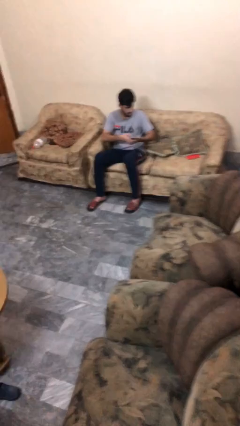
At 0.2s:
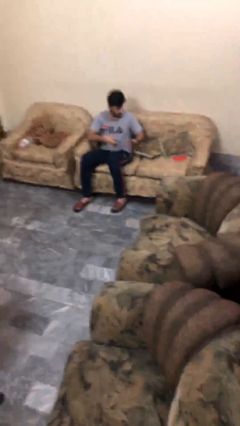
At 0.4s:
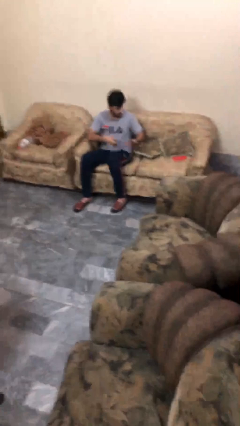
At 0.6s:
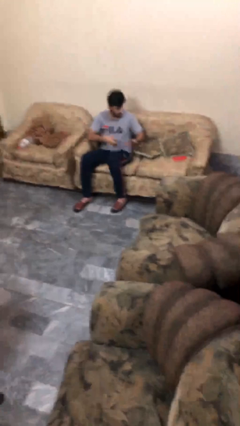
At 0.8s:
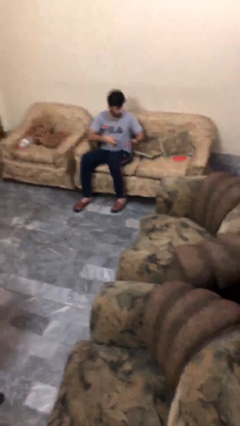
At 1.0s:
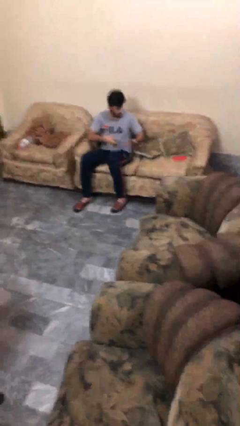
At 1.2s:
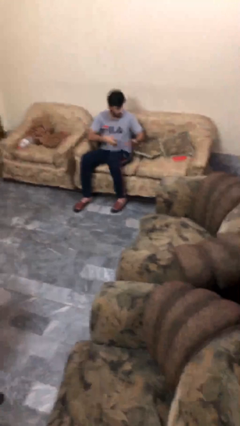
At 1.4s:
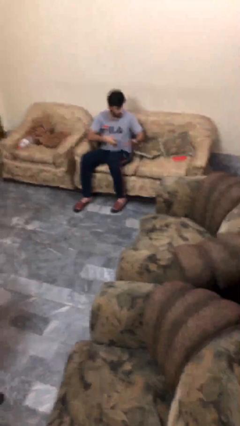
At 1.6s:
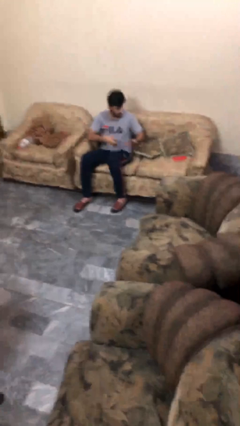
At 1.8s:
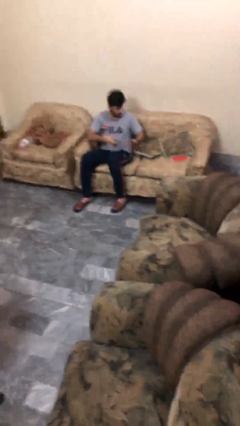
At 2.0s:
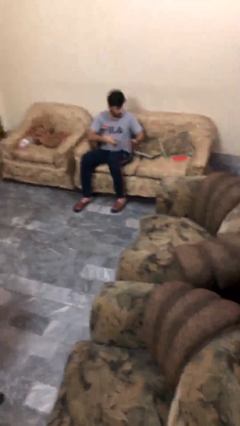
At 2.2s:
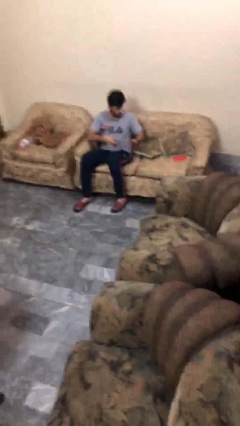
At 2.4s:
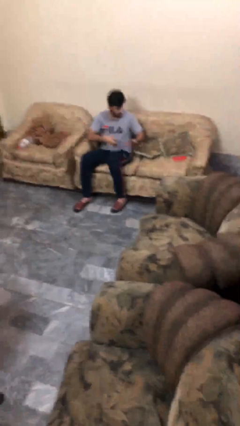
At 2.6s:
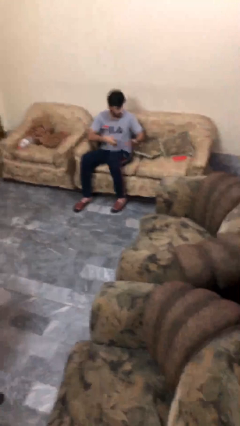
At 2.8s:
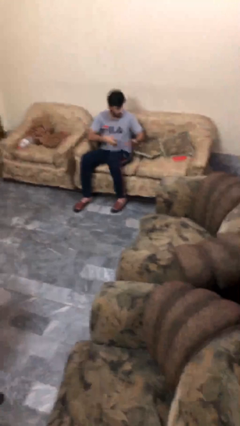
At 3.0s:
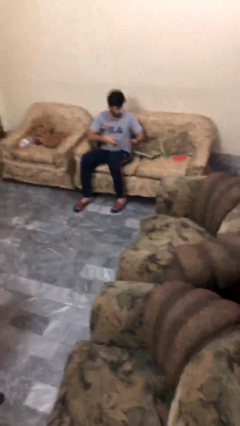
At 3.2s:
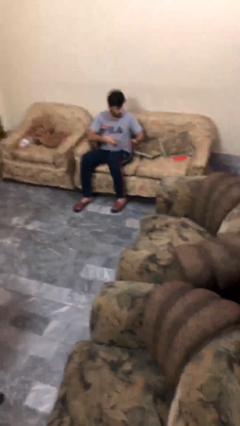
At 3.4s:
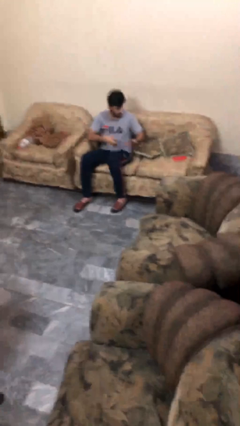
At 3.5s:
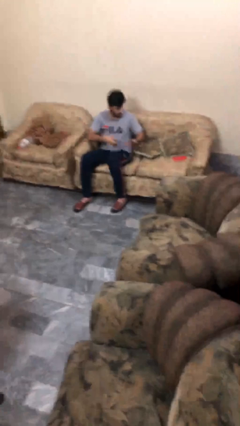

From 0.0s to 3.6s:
person gestures thumbs down

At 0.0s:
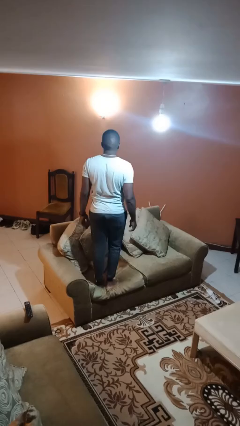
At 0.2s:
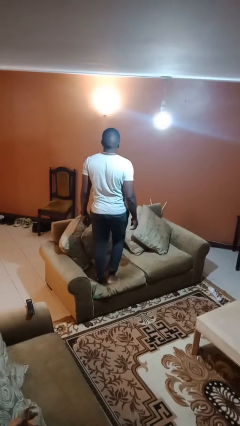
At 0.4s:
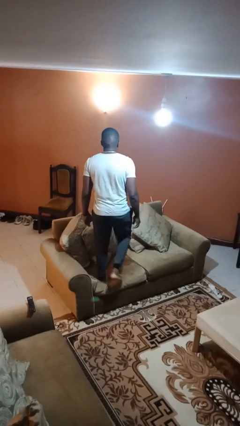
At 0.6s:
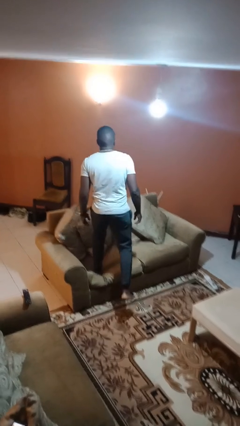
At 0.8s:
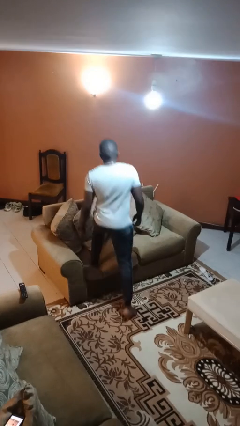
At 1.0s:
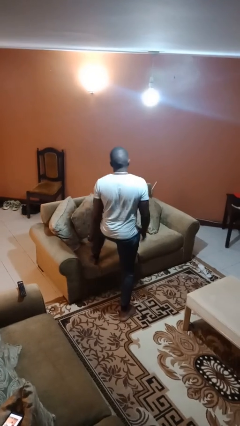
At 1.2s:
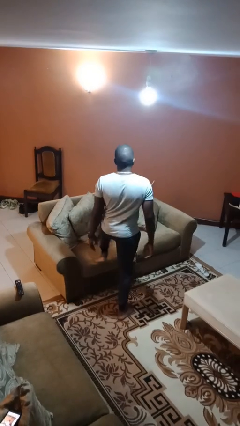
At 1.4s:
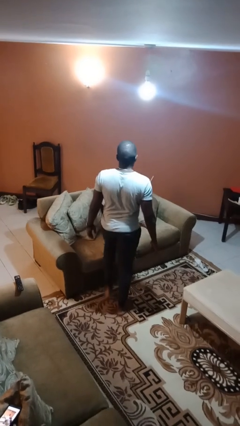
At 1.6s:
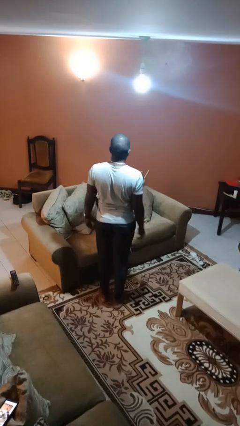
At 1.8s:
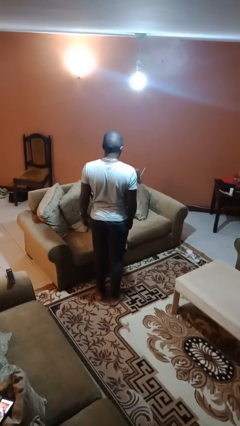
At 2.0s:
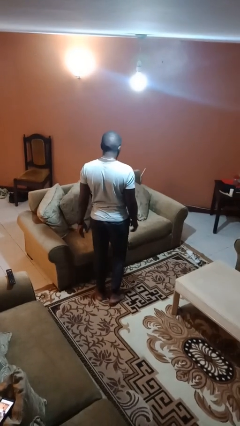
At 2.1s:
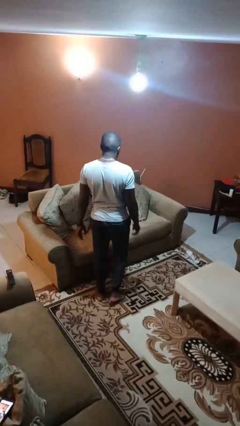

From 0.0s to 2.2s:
person climbs off couch

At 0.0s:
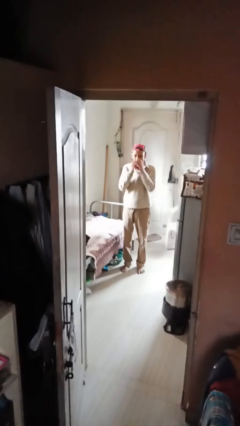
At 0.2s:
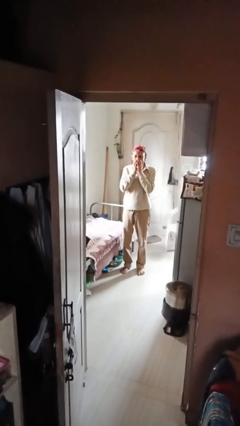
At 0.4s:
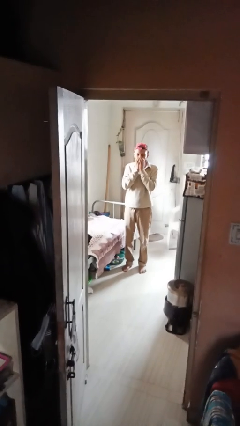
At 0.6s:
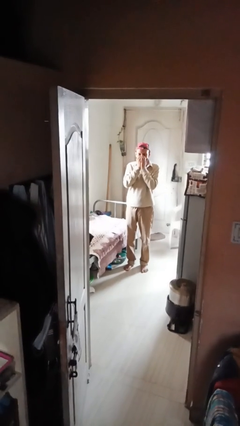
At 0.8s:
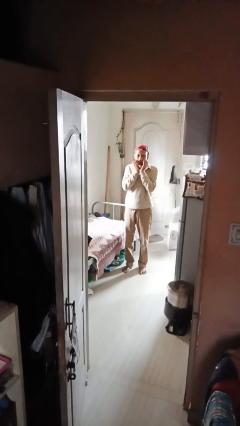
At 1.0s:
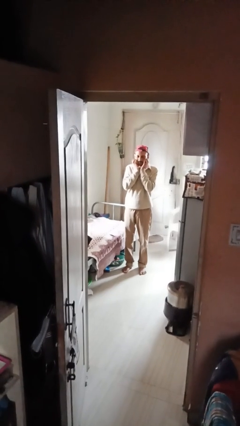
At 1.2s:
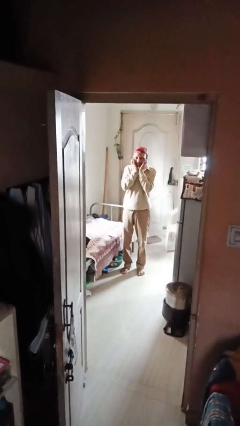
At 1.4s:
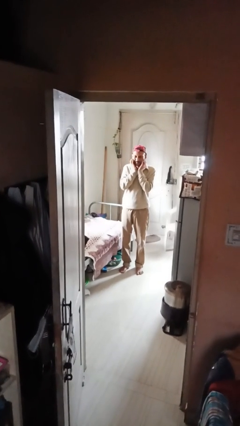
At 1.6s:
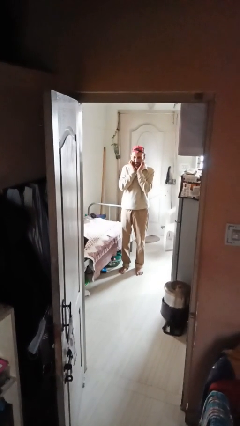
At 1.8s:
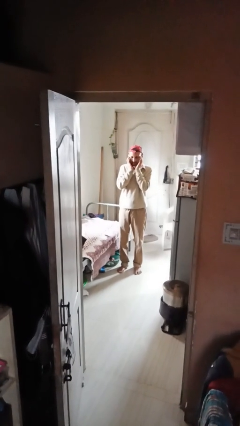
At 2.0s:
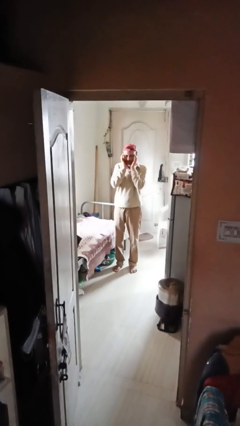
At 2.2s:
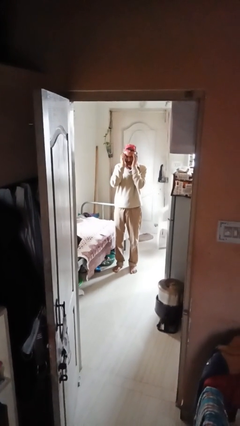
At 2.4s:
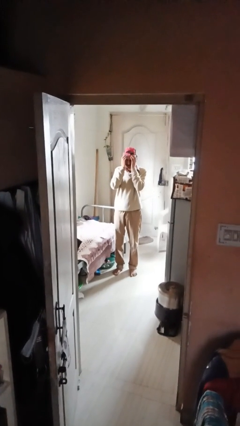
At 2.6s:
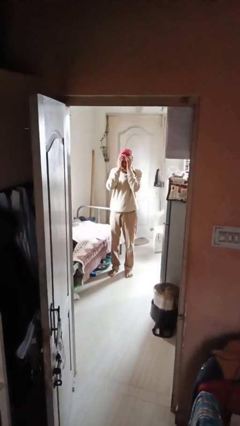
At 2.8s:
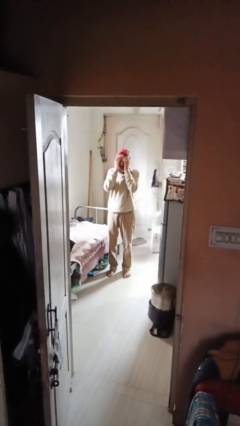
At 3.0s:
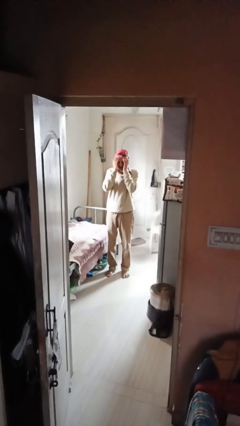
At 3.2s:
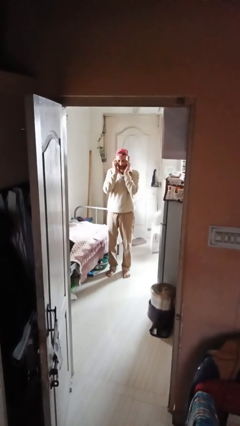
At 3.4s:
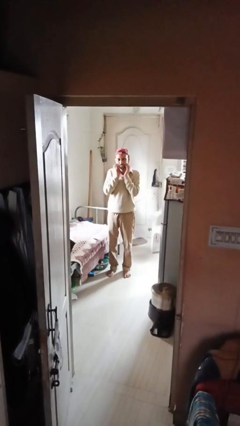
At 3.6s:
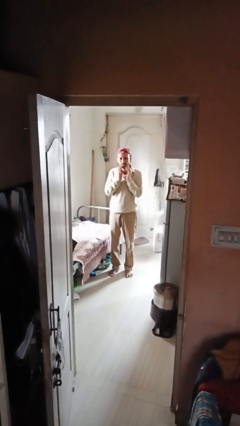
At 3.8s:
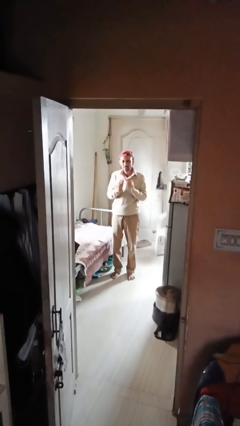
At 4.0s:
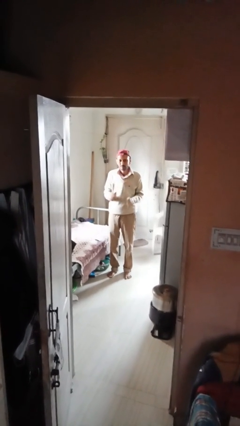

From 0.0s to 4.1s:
person scratches face

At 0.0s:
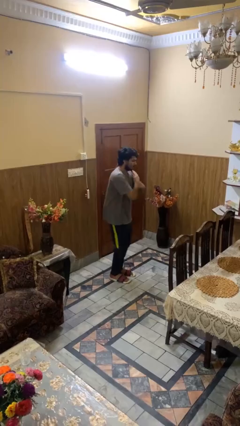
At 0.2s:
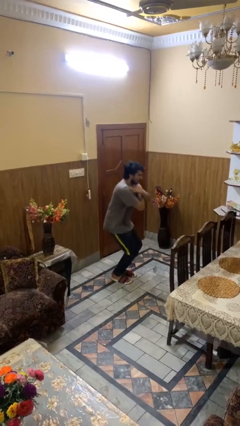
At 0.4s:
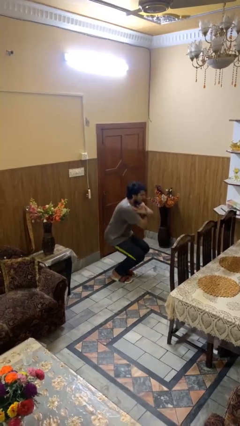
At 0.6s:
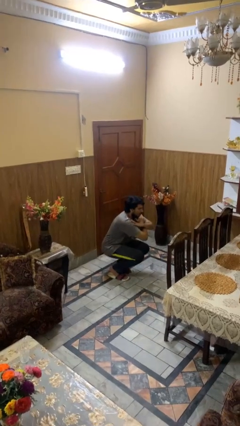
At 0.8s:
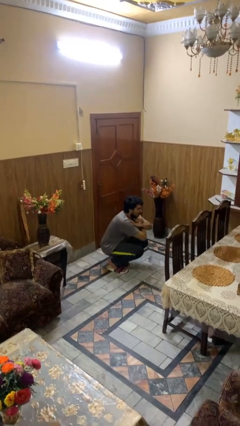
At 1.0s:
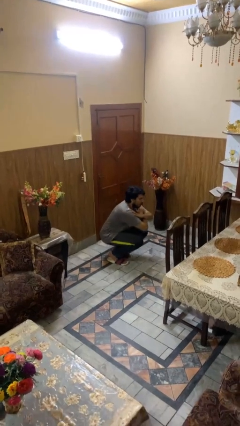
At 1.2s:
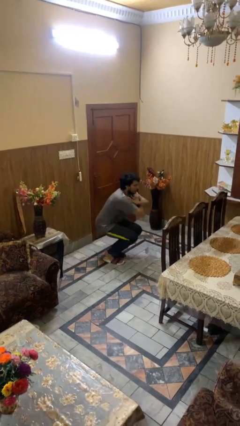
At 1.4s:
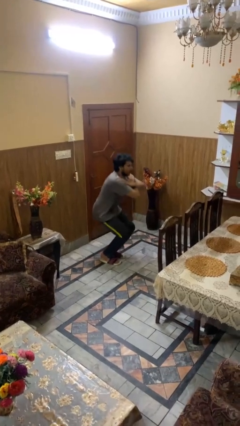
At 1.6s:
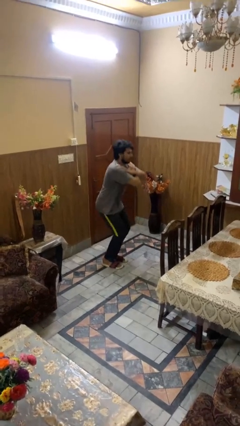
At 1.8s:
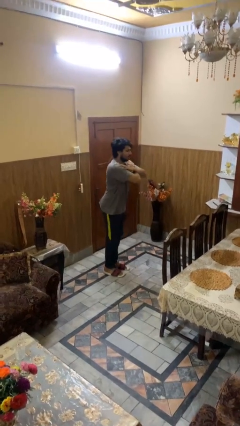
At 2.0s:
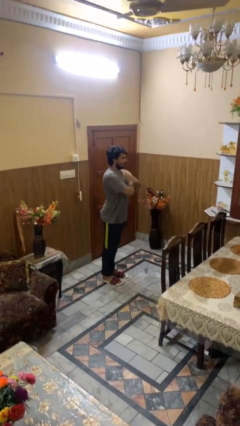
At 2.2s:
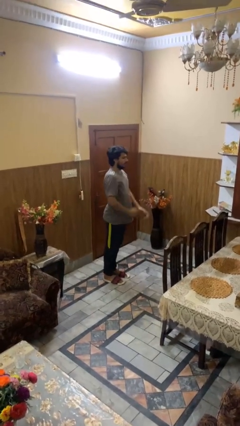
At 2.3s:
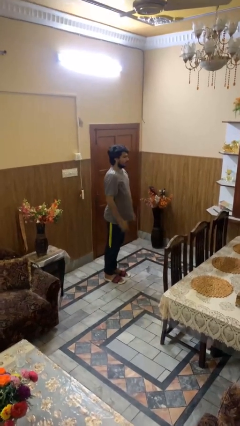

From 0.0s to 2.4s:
person exercises with situp

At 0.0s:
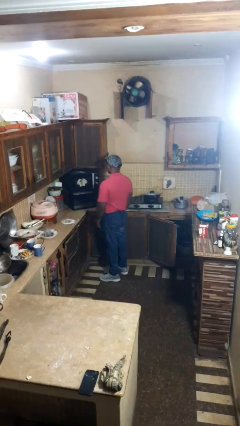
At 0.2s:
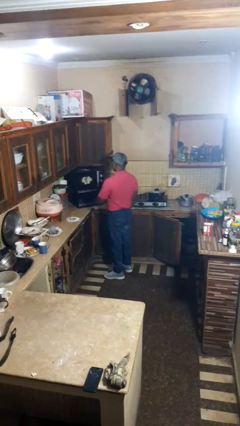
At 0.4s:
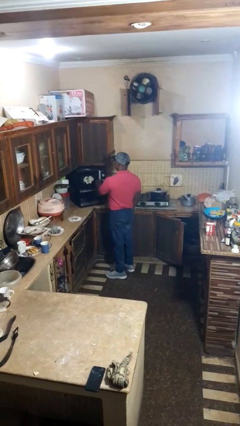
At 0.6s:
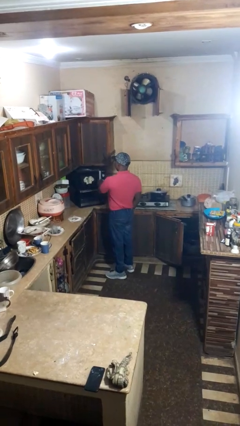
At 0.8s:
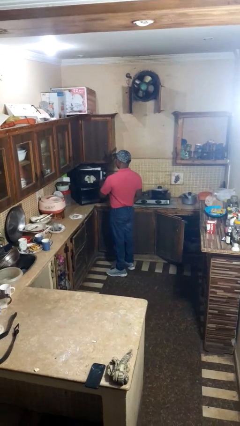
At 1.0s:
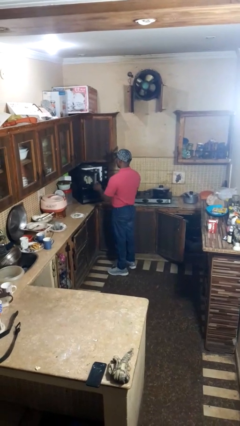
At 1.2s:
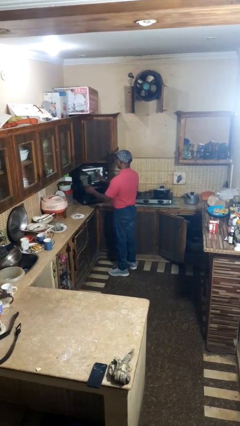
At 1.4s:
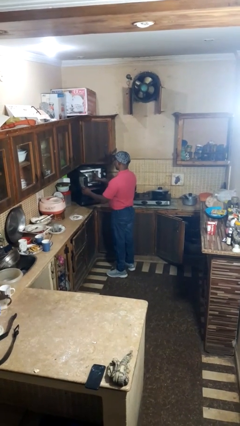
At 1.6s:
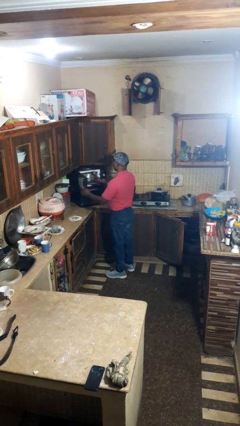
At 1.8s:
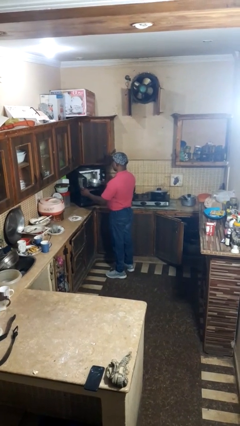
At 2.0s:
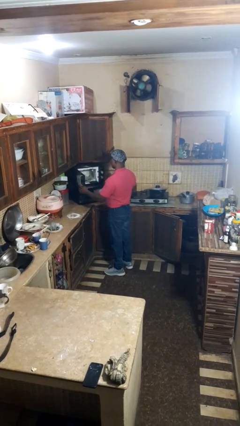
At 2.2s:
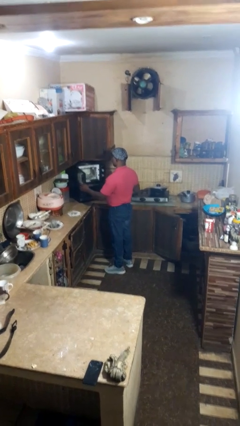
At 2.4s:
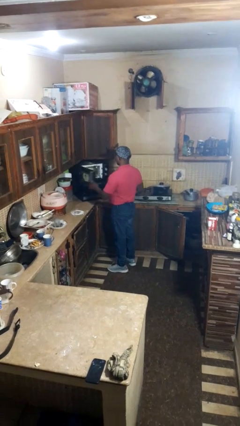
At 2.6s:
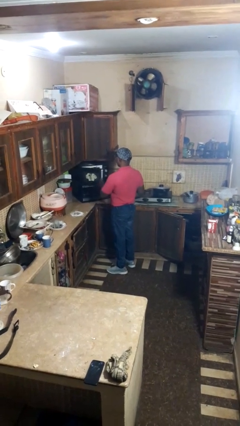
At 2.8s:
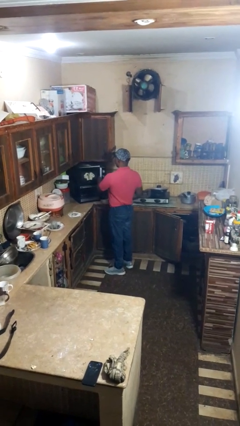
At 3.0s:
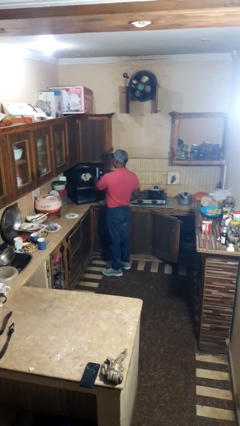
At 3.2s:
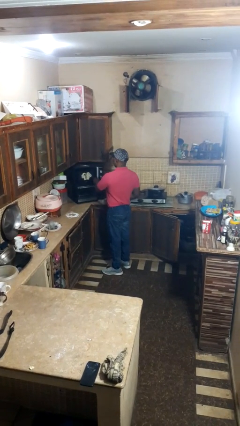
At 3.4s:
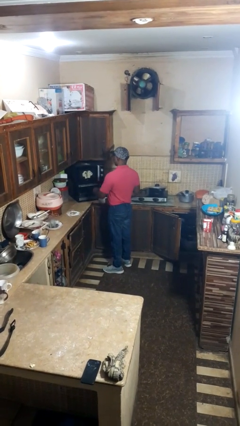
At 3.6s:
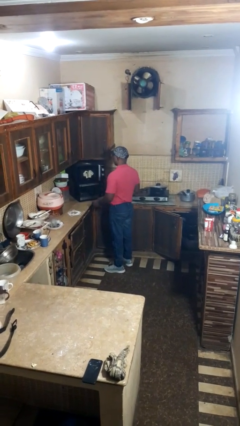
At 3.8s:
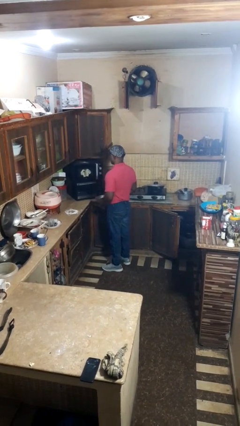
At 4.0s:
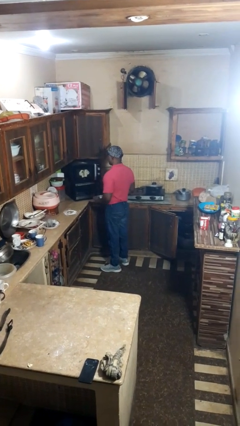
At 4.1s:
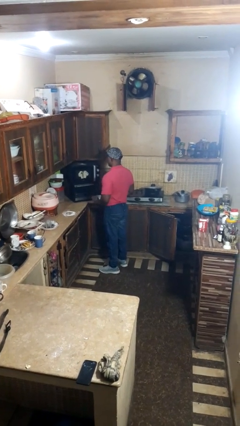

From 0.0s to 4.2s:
person takes object from microwave

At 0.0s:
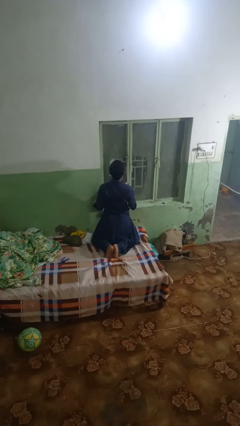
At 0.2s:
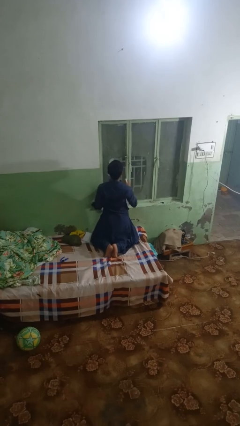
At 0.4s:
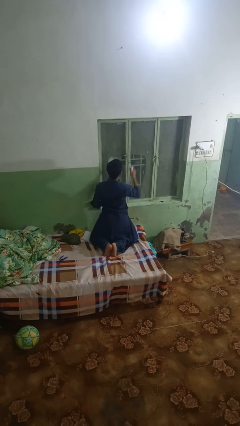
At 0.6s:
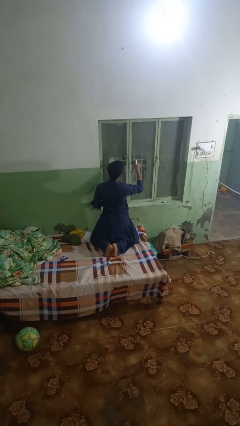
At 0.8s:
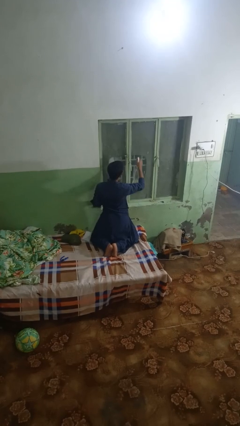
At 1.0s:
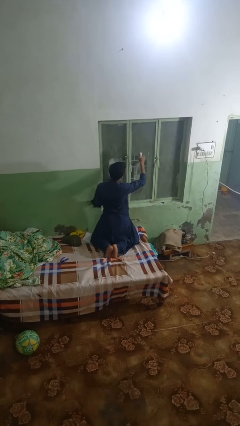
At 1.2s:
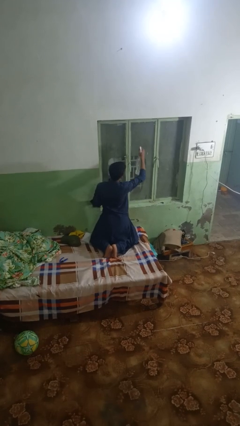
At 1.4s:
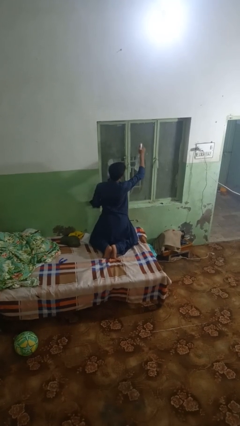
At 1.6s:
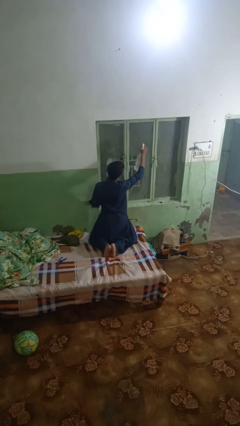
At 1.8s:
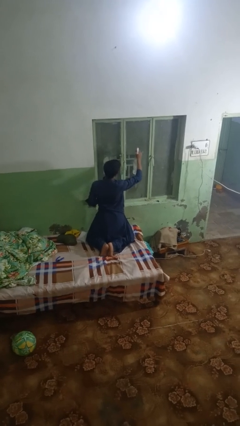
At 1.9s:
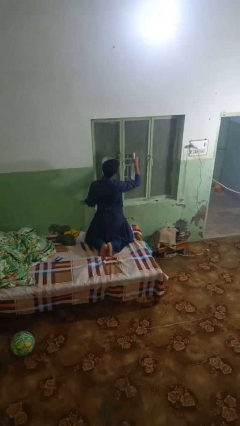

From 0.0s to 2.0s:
person sprays from bottle
